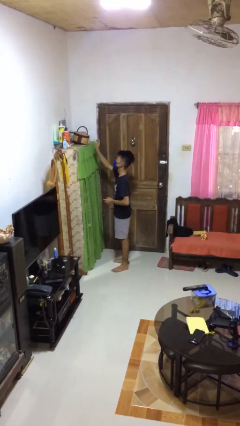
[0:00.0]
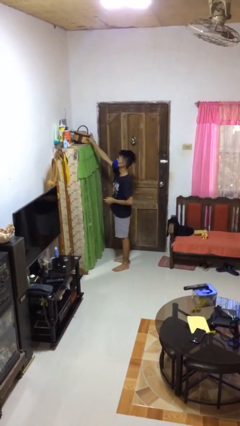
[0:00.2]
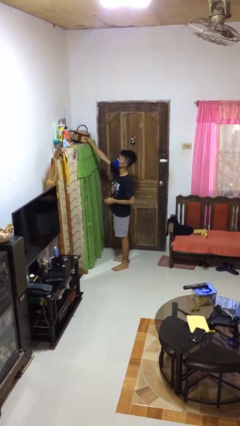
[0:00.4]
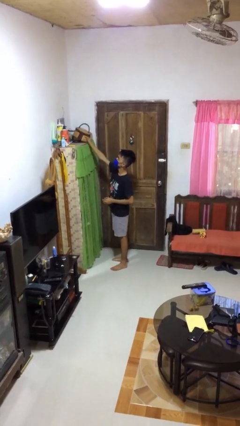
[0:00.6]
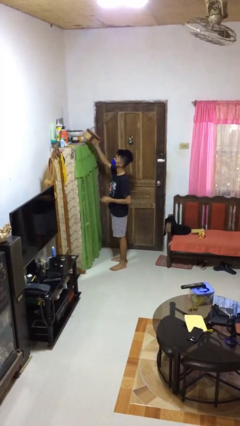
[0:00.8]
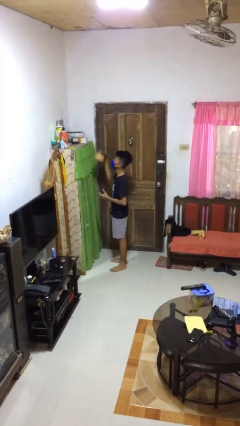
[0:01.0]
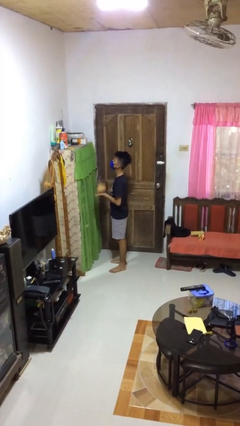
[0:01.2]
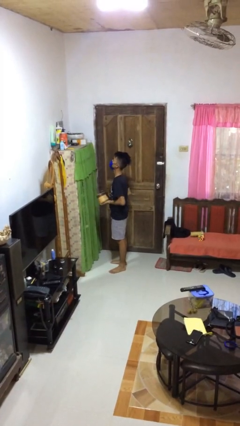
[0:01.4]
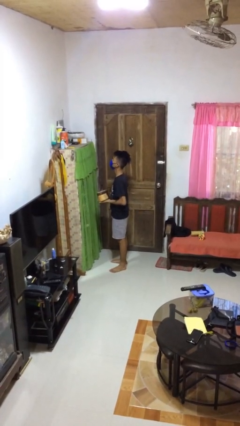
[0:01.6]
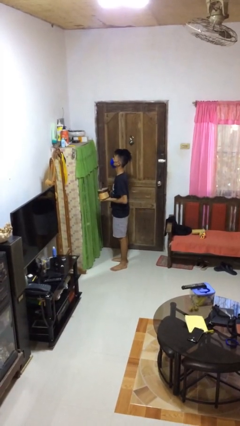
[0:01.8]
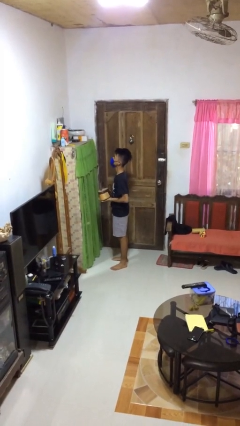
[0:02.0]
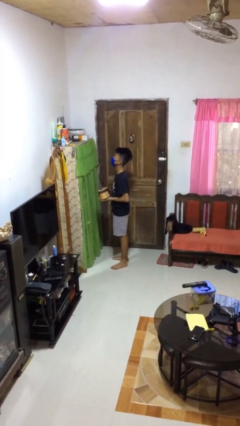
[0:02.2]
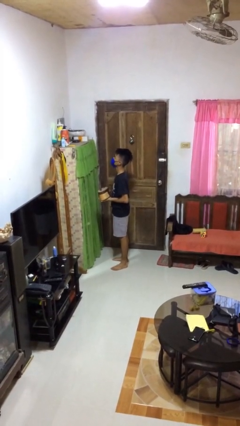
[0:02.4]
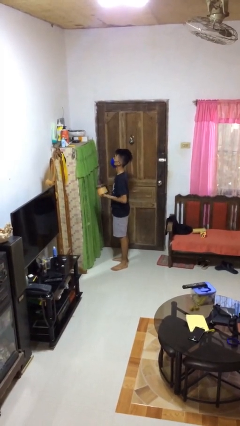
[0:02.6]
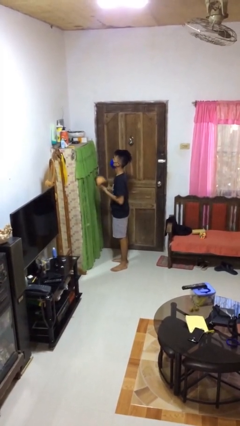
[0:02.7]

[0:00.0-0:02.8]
person picks up object from shelf

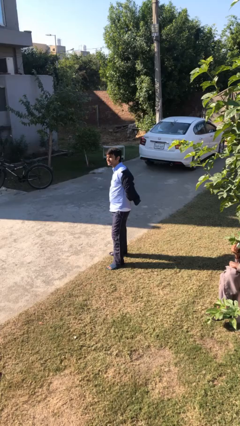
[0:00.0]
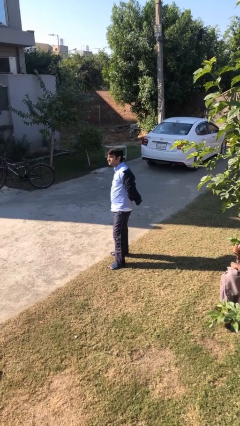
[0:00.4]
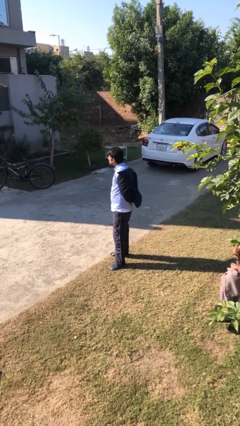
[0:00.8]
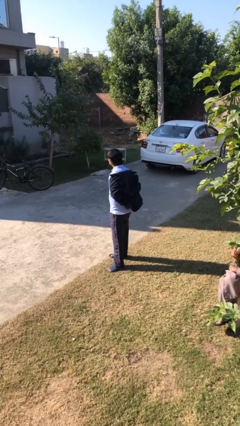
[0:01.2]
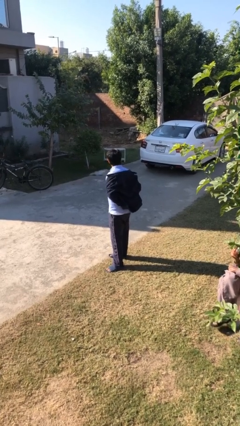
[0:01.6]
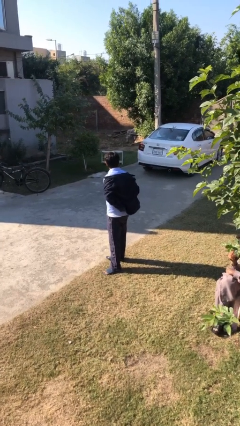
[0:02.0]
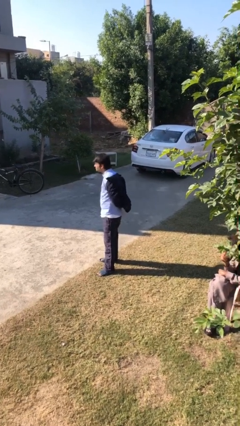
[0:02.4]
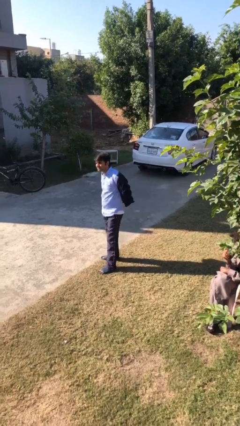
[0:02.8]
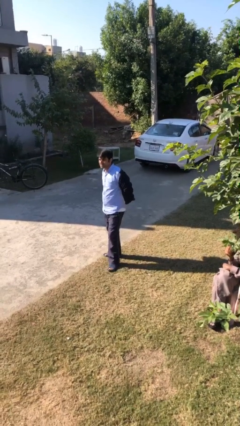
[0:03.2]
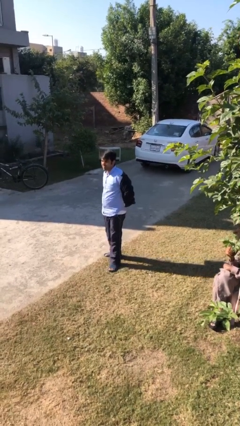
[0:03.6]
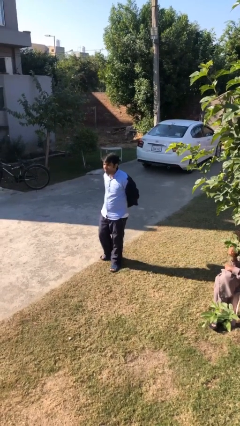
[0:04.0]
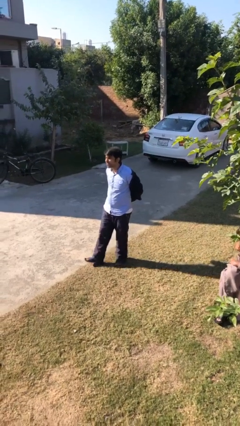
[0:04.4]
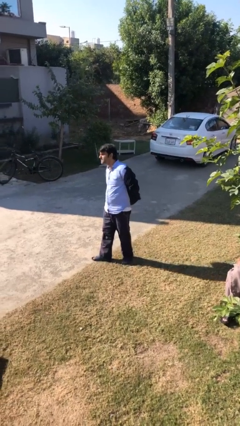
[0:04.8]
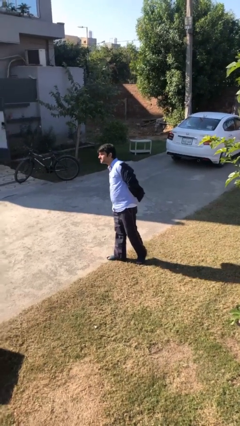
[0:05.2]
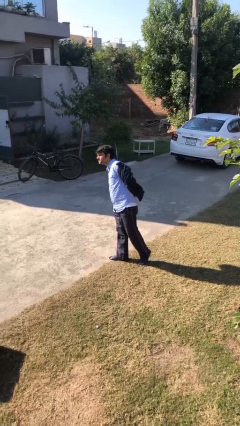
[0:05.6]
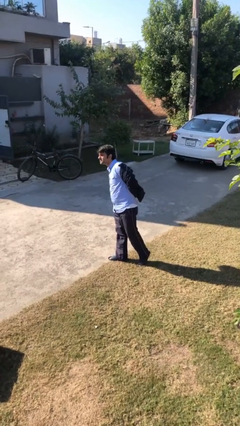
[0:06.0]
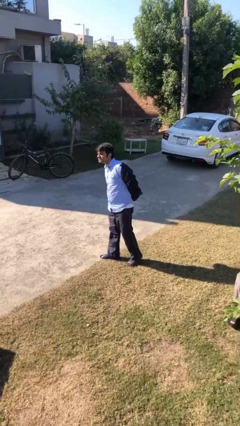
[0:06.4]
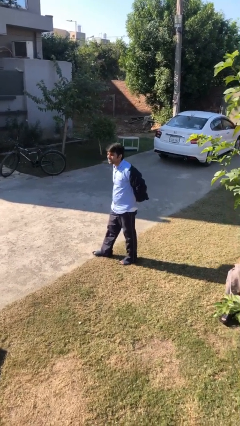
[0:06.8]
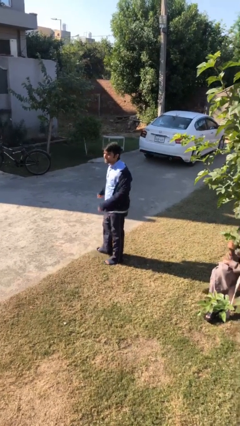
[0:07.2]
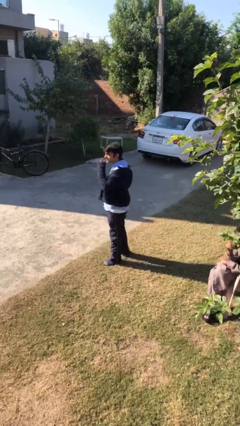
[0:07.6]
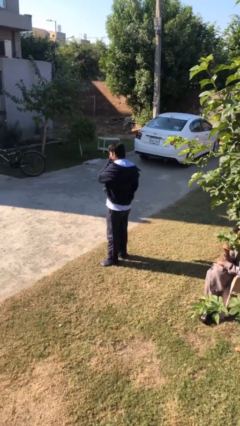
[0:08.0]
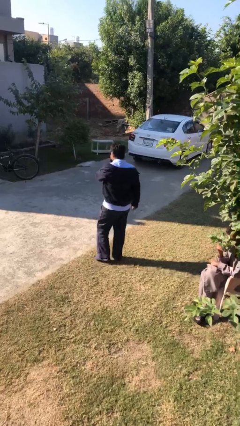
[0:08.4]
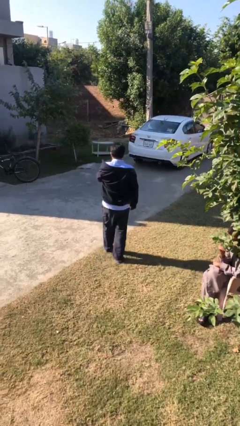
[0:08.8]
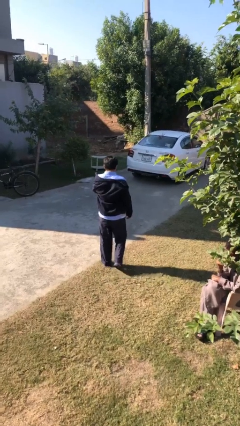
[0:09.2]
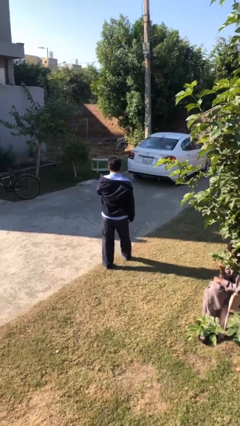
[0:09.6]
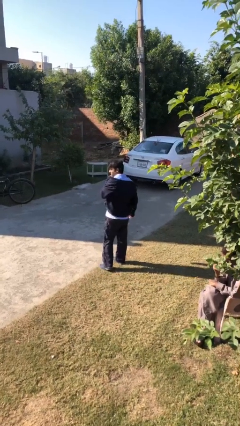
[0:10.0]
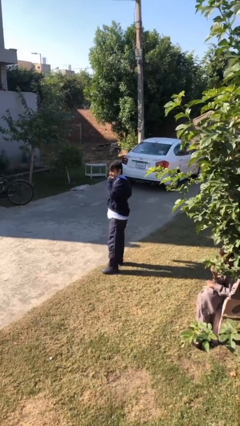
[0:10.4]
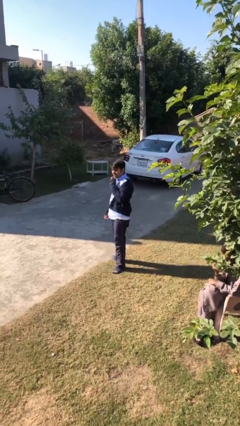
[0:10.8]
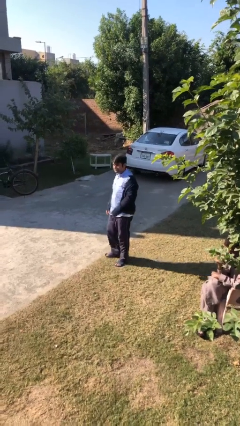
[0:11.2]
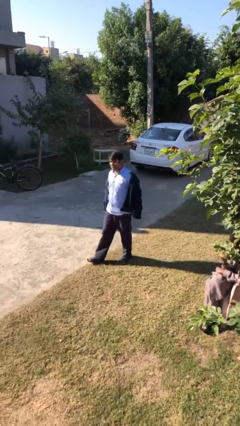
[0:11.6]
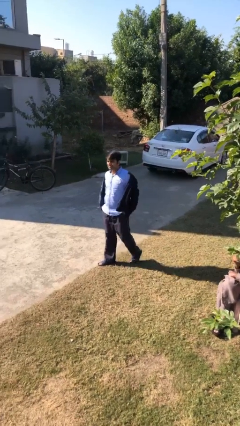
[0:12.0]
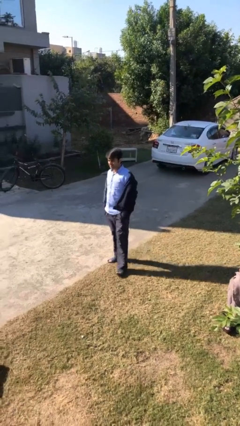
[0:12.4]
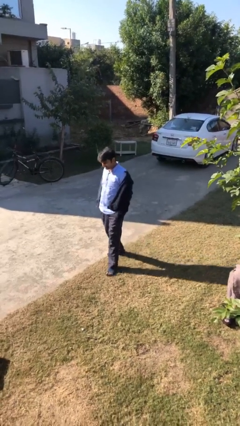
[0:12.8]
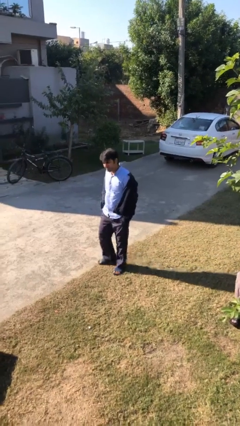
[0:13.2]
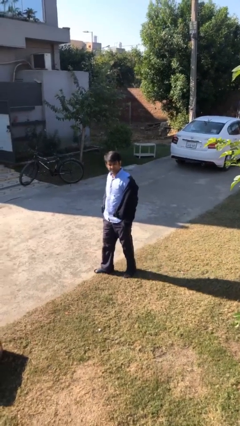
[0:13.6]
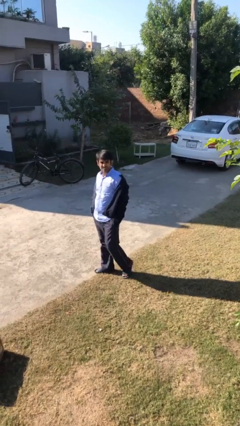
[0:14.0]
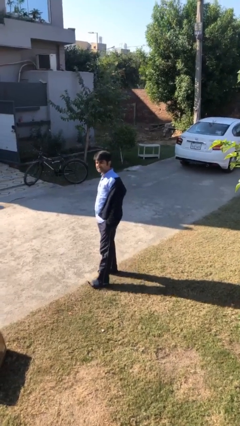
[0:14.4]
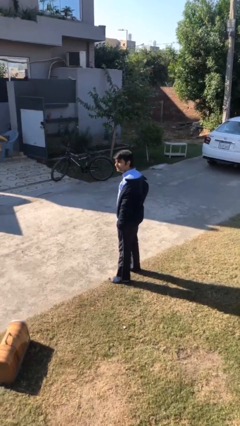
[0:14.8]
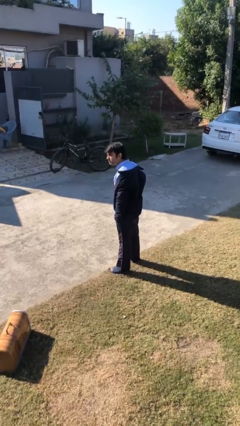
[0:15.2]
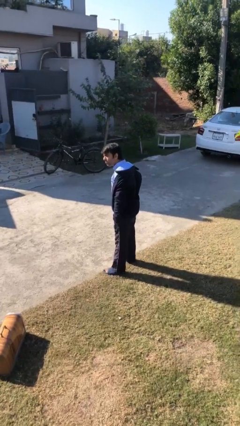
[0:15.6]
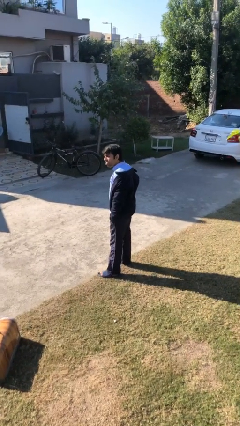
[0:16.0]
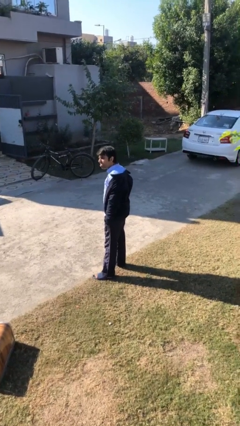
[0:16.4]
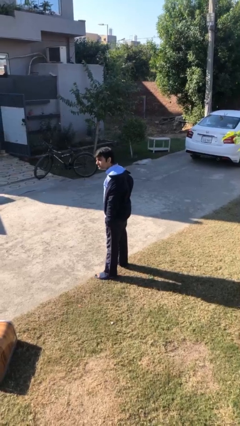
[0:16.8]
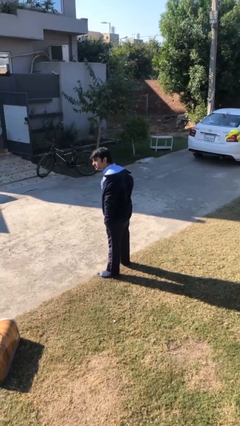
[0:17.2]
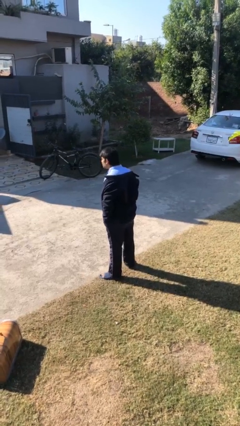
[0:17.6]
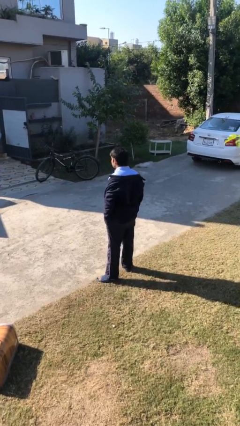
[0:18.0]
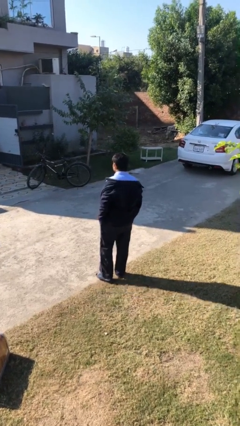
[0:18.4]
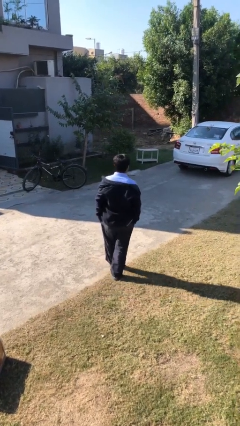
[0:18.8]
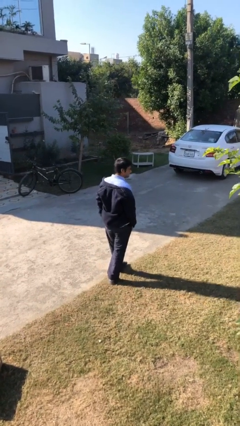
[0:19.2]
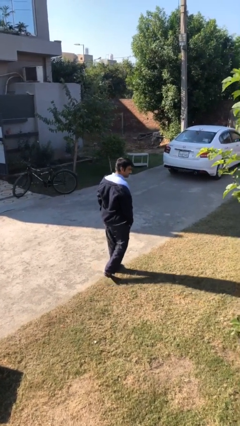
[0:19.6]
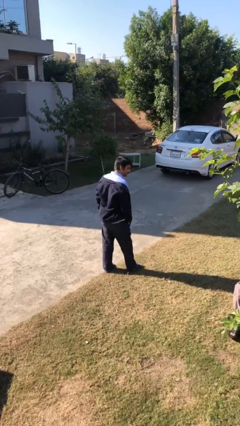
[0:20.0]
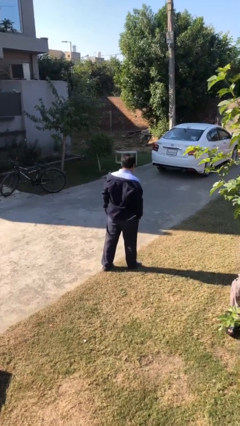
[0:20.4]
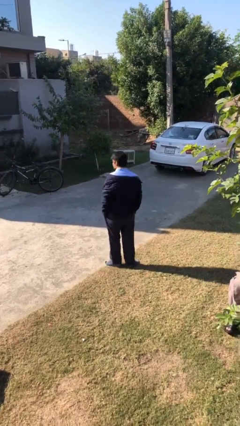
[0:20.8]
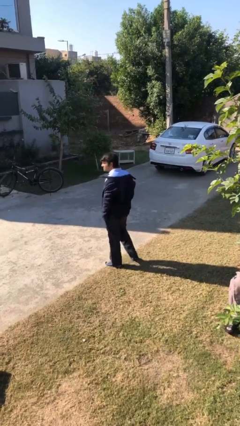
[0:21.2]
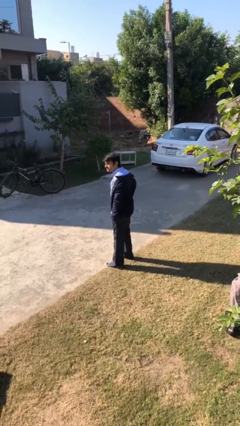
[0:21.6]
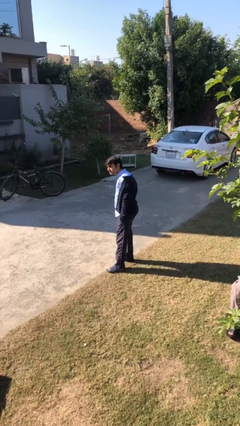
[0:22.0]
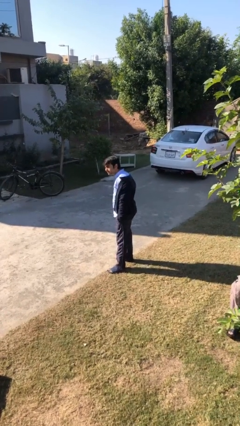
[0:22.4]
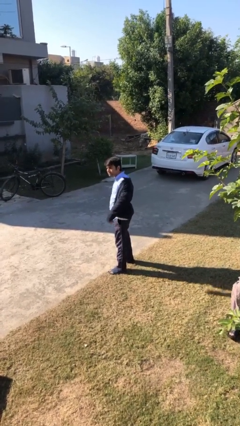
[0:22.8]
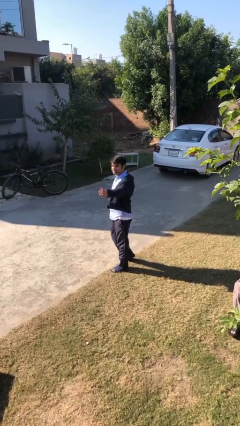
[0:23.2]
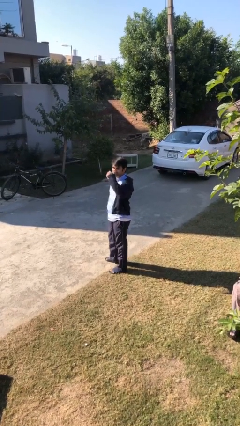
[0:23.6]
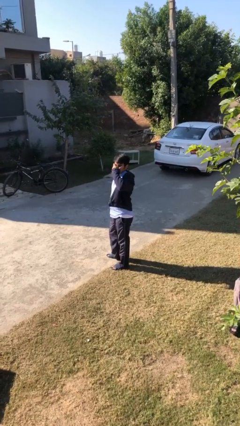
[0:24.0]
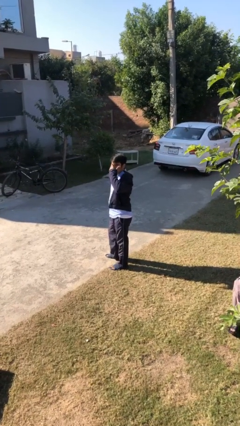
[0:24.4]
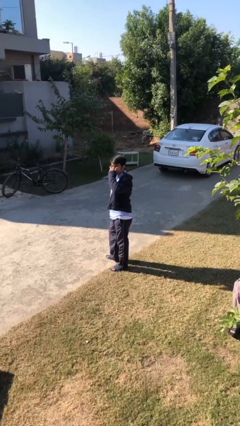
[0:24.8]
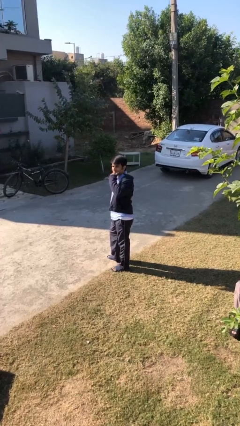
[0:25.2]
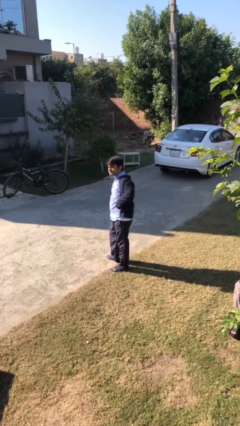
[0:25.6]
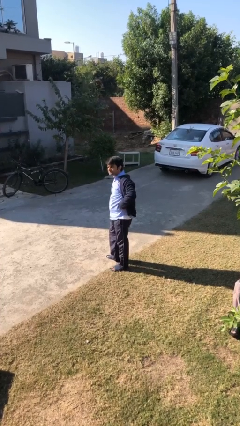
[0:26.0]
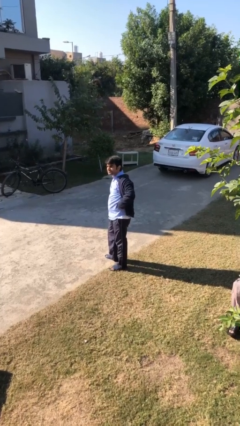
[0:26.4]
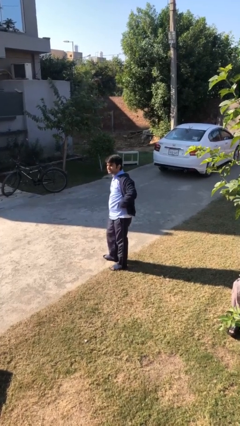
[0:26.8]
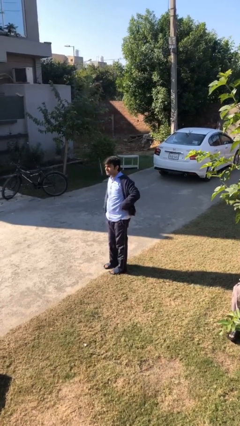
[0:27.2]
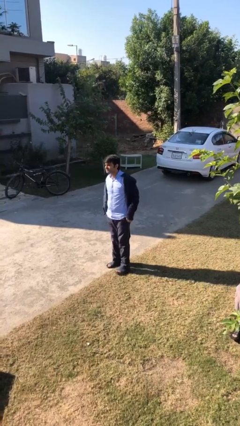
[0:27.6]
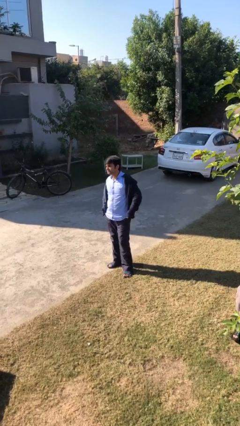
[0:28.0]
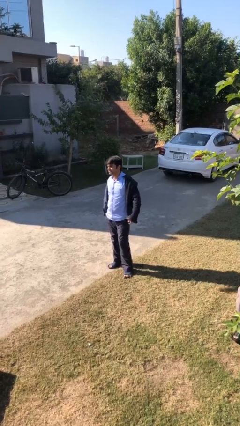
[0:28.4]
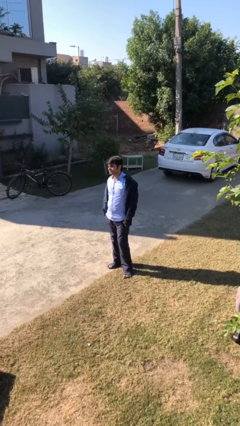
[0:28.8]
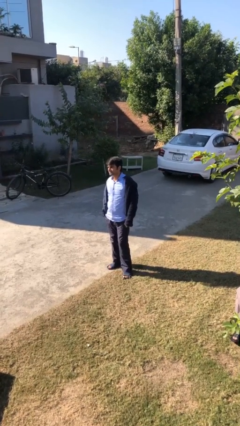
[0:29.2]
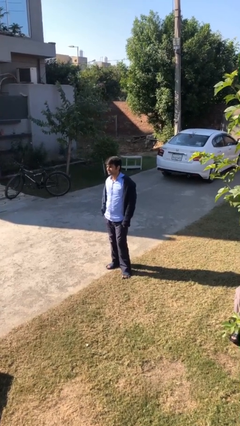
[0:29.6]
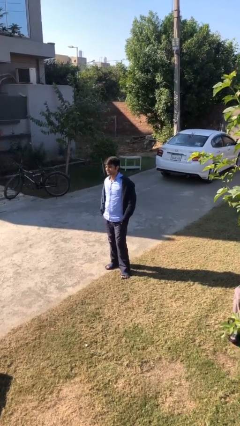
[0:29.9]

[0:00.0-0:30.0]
person walks

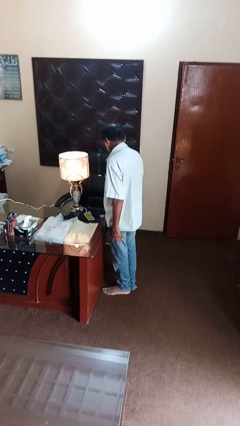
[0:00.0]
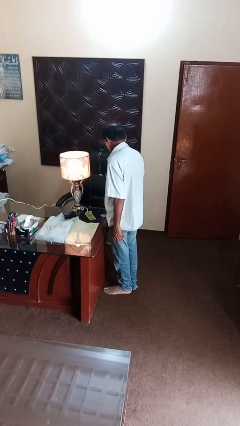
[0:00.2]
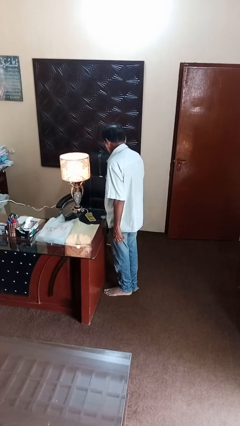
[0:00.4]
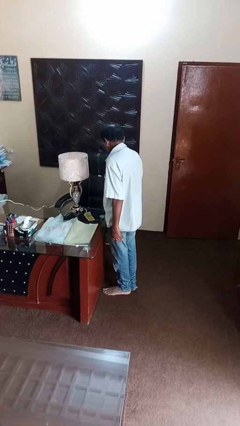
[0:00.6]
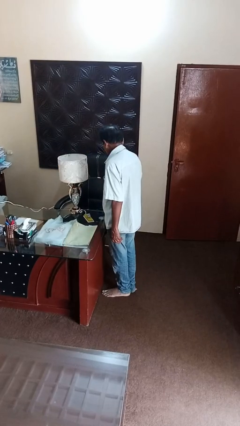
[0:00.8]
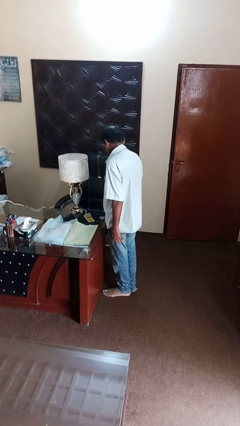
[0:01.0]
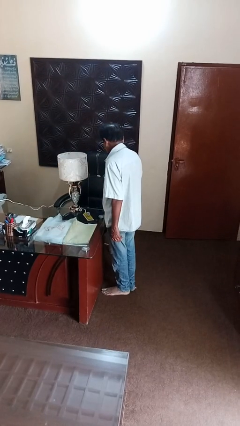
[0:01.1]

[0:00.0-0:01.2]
person turns off lamp
